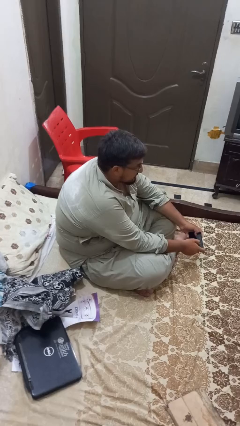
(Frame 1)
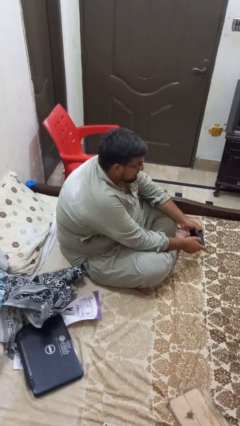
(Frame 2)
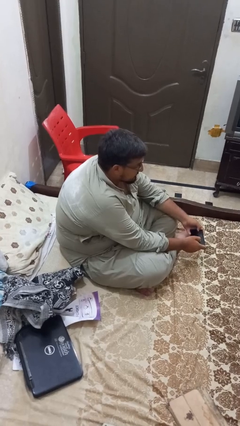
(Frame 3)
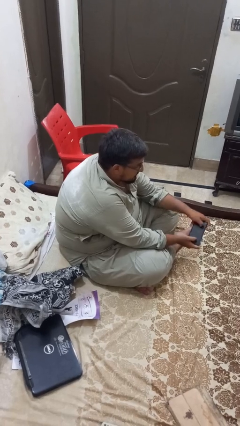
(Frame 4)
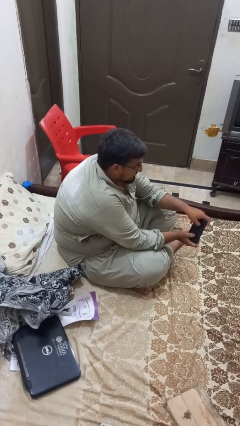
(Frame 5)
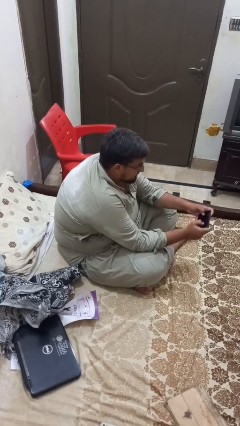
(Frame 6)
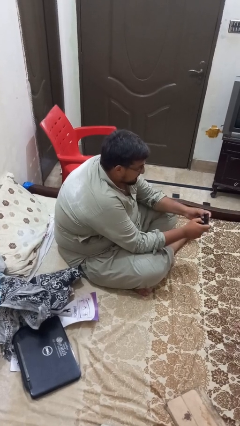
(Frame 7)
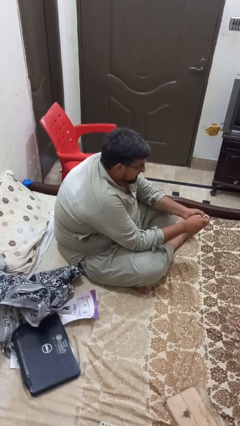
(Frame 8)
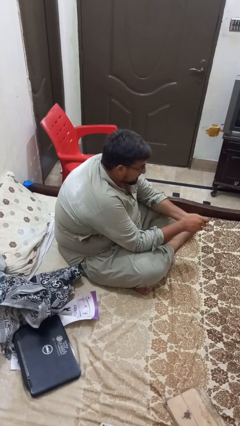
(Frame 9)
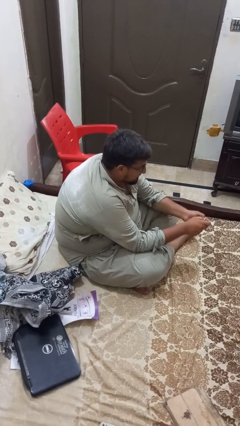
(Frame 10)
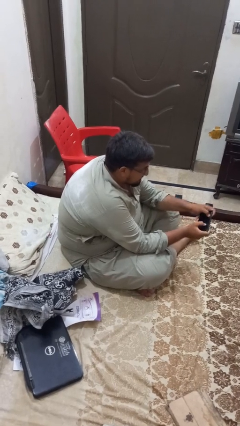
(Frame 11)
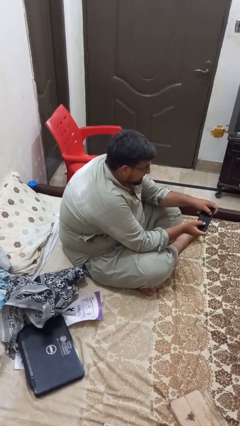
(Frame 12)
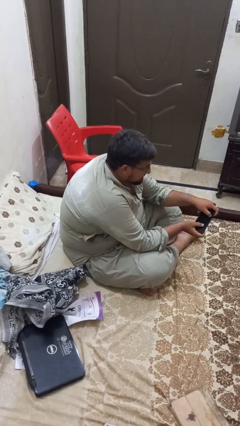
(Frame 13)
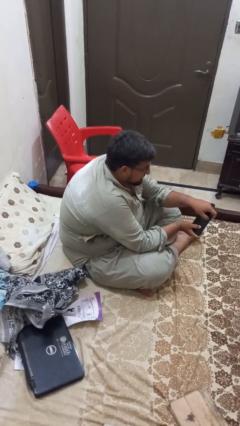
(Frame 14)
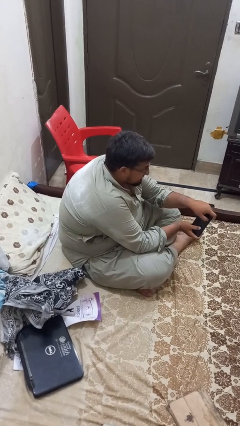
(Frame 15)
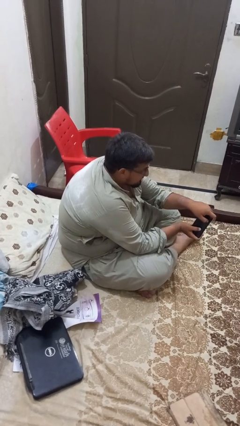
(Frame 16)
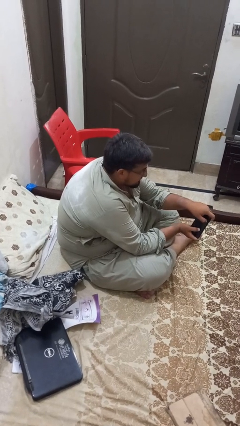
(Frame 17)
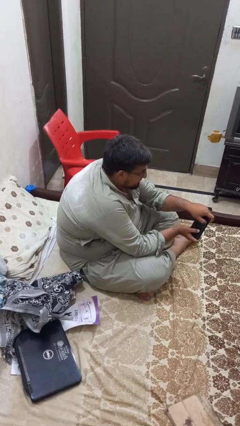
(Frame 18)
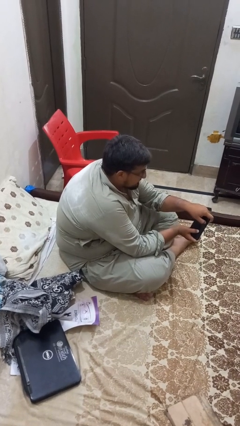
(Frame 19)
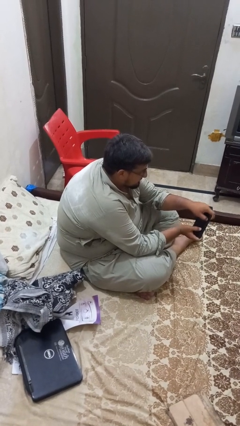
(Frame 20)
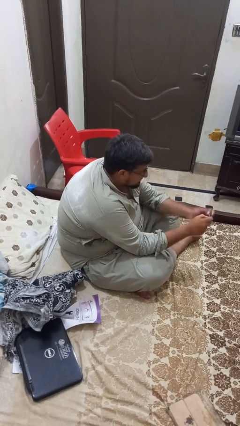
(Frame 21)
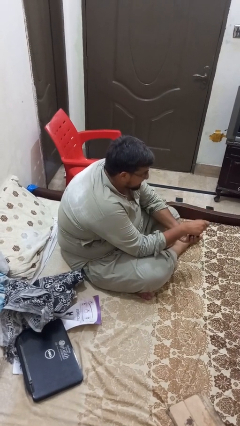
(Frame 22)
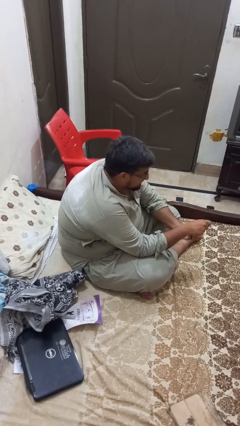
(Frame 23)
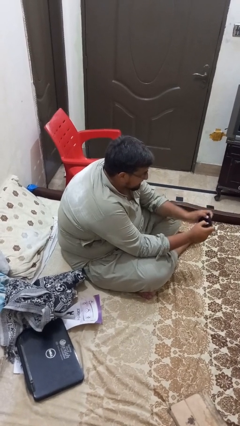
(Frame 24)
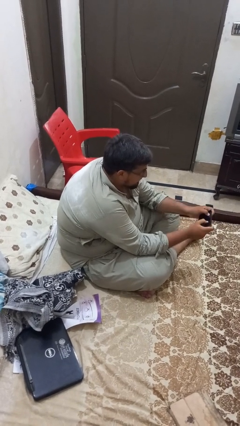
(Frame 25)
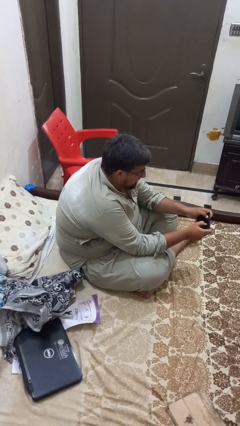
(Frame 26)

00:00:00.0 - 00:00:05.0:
person interacts with handheld game

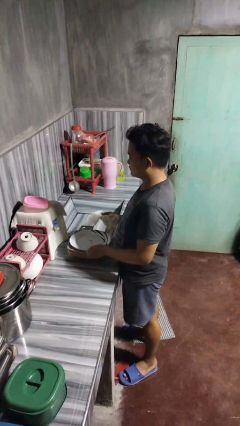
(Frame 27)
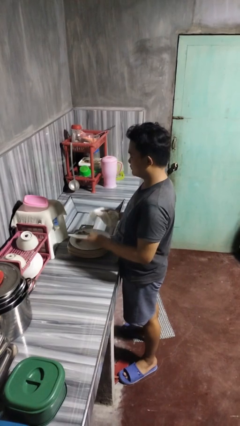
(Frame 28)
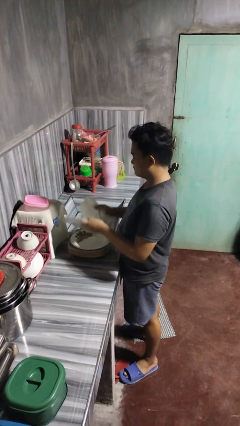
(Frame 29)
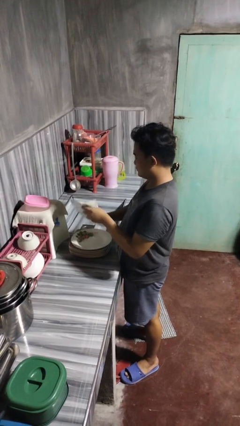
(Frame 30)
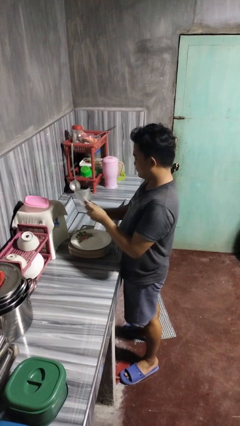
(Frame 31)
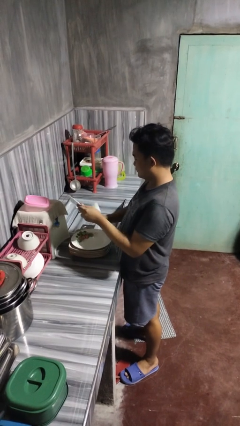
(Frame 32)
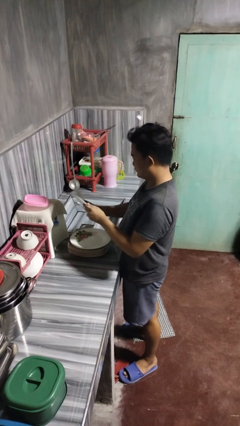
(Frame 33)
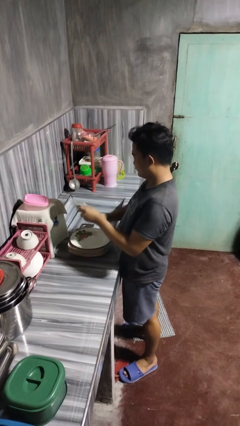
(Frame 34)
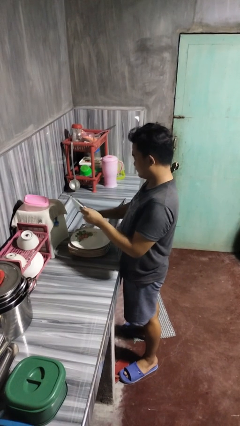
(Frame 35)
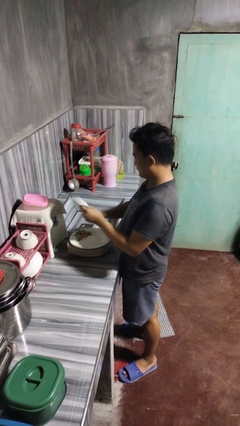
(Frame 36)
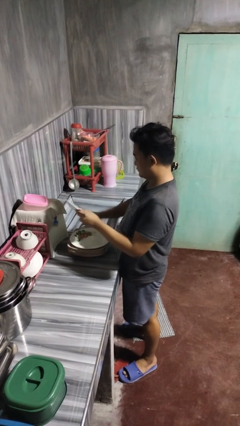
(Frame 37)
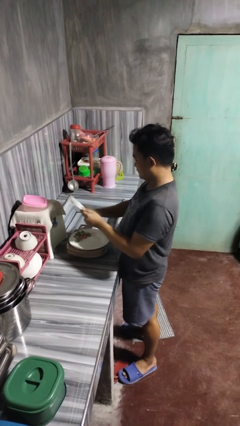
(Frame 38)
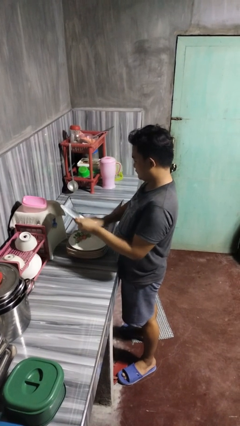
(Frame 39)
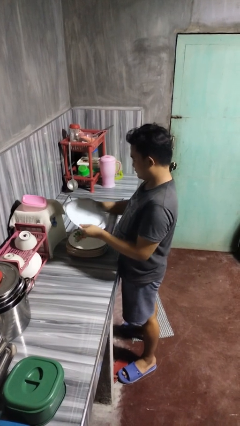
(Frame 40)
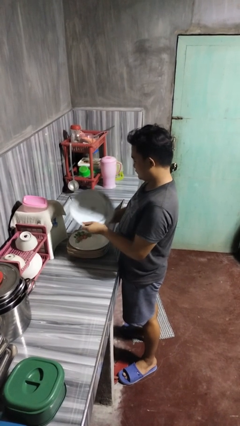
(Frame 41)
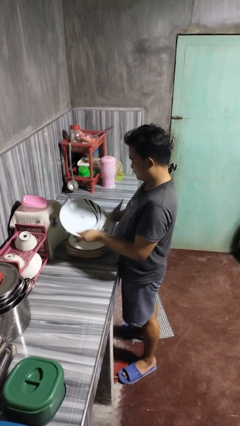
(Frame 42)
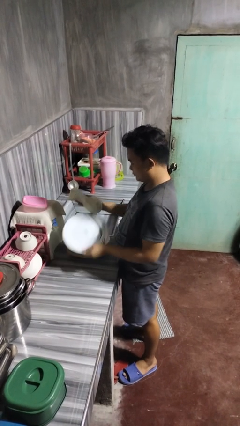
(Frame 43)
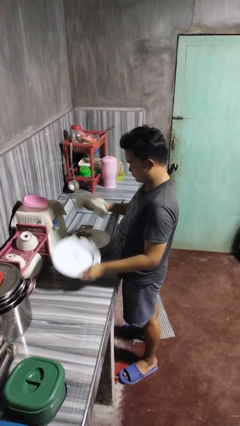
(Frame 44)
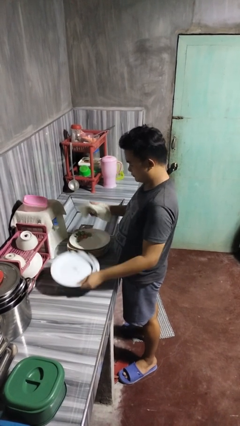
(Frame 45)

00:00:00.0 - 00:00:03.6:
person dries dish

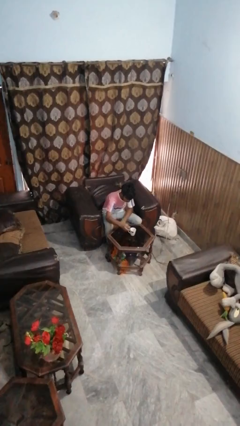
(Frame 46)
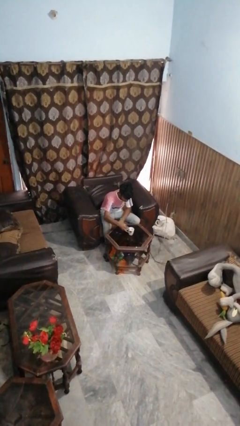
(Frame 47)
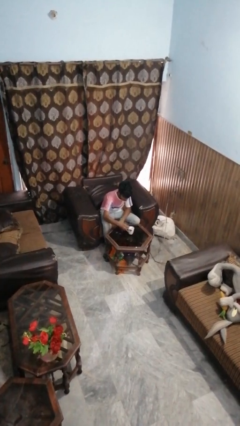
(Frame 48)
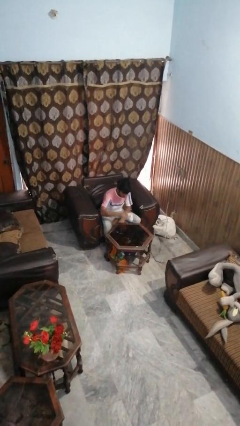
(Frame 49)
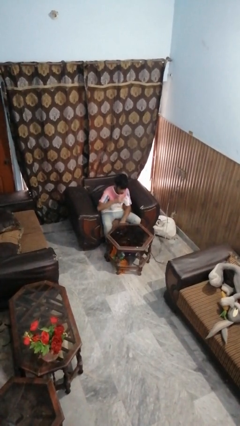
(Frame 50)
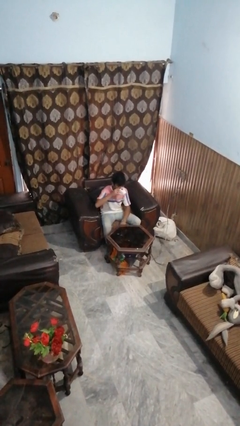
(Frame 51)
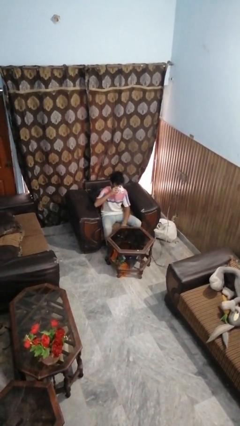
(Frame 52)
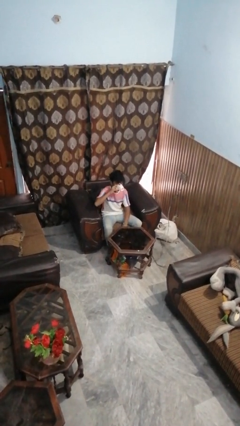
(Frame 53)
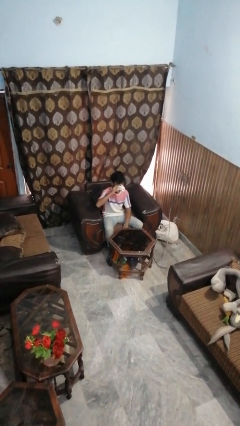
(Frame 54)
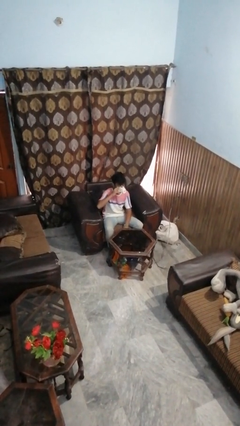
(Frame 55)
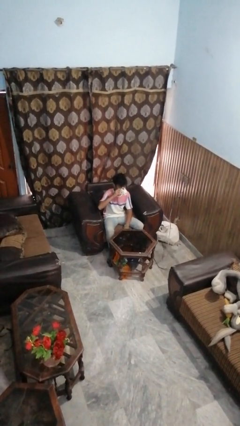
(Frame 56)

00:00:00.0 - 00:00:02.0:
person drinks from mug

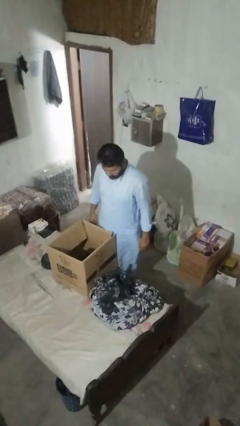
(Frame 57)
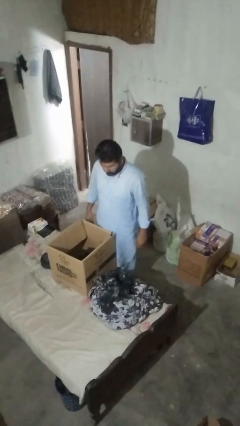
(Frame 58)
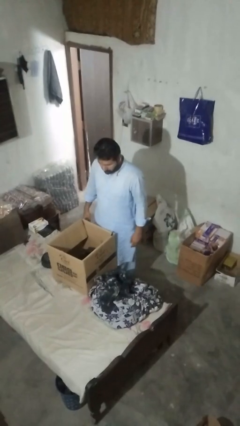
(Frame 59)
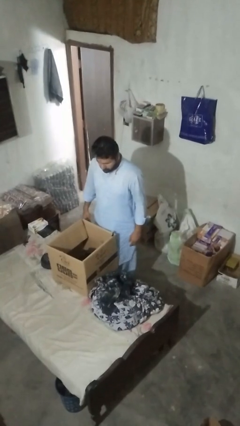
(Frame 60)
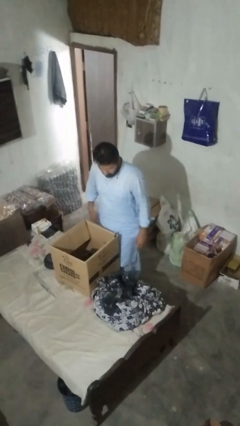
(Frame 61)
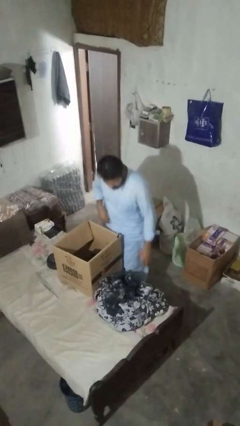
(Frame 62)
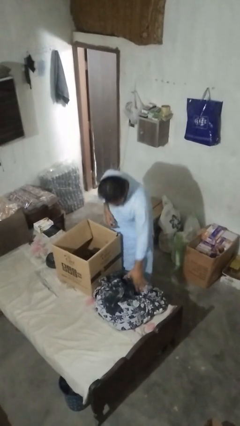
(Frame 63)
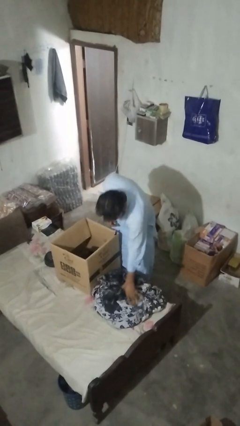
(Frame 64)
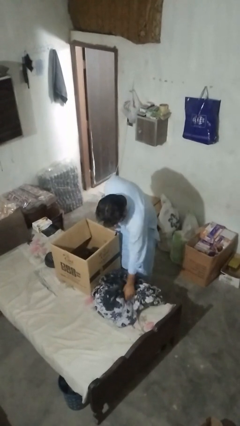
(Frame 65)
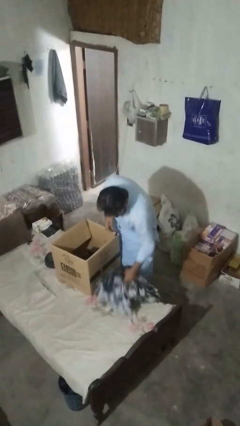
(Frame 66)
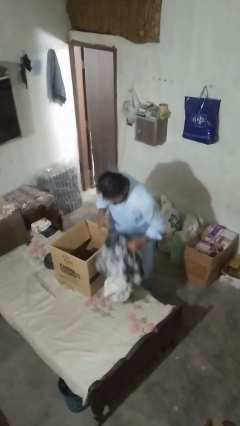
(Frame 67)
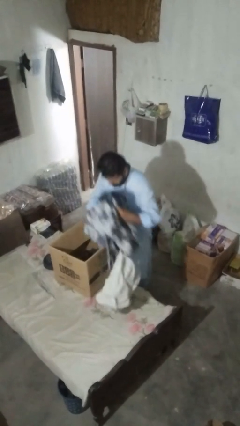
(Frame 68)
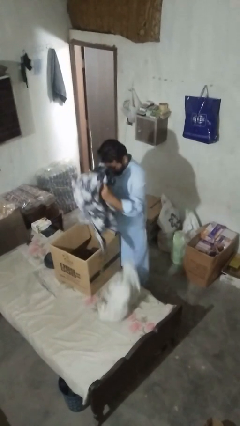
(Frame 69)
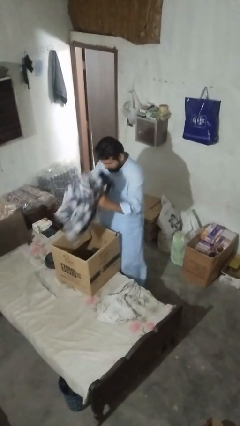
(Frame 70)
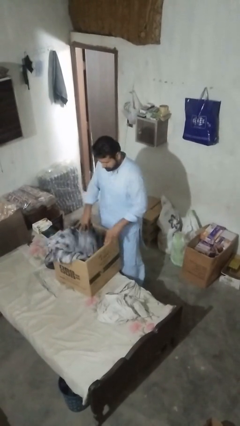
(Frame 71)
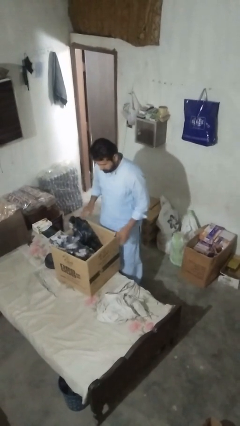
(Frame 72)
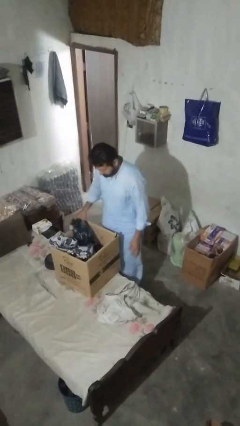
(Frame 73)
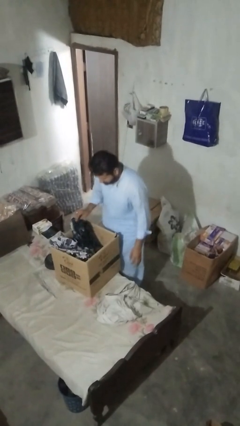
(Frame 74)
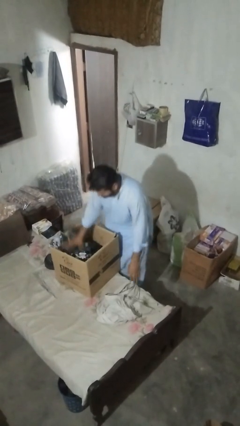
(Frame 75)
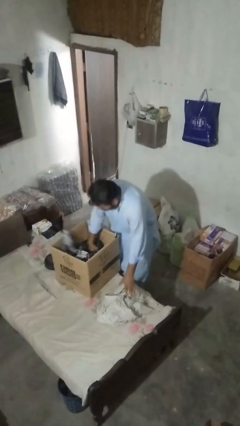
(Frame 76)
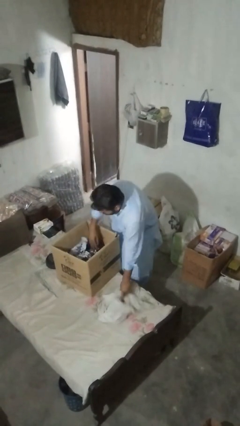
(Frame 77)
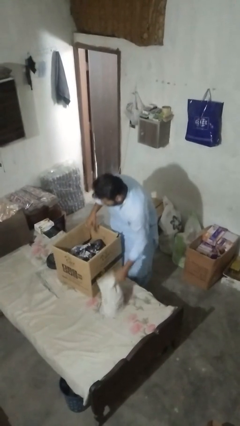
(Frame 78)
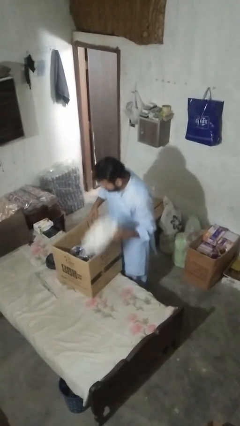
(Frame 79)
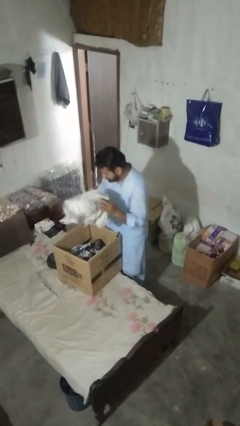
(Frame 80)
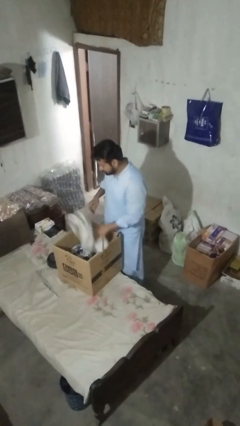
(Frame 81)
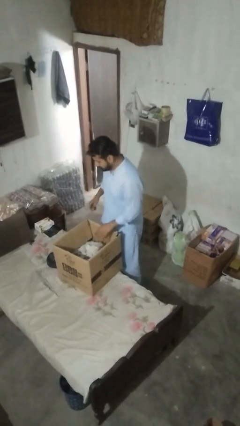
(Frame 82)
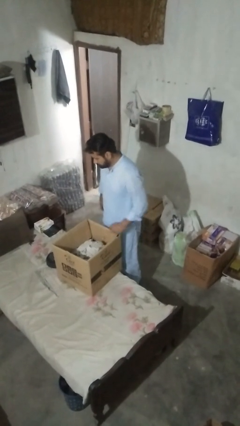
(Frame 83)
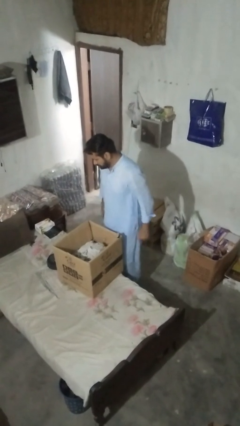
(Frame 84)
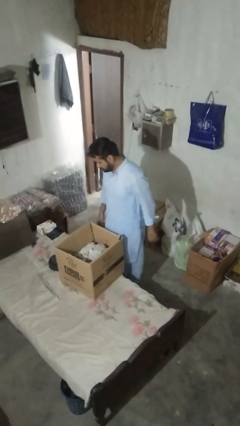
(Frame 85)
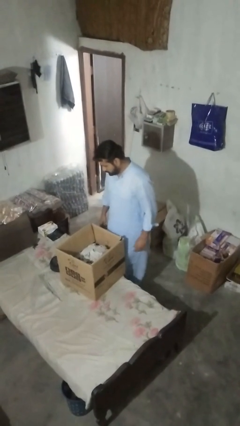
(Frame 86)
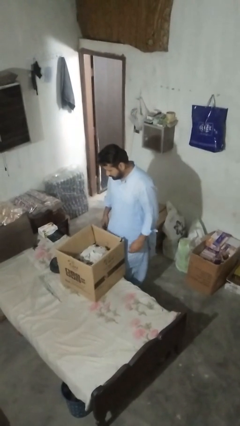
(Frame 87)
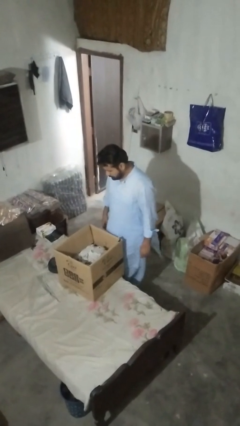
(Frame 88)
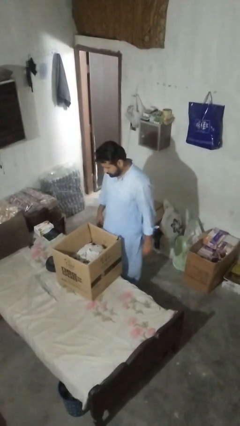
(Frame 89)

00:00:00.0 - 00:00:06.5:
person loads clotheswasher

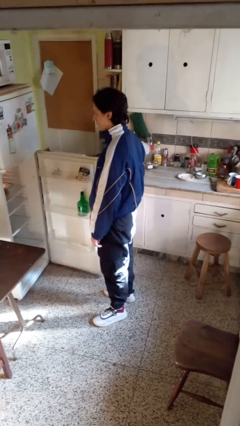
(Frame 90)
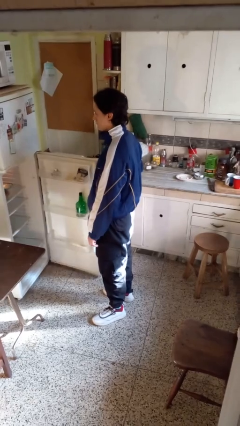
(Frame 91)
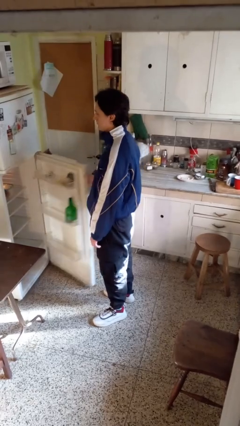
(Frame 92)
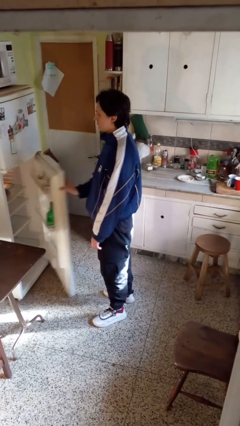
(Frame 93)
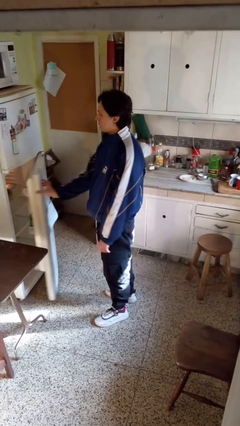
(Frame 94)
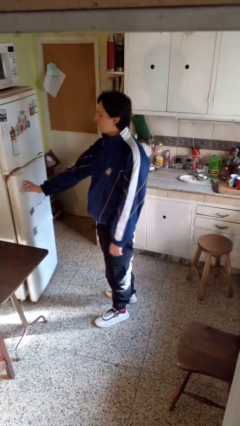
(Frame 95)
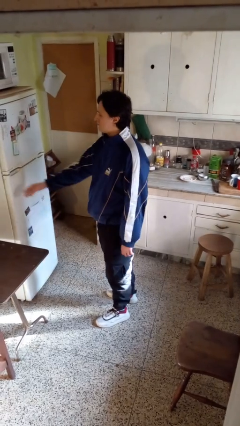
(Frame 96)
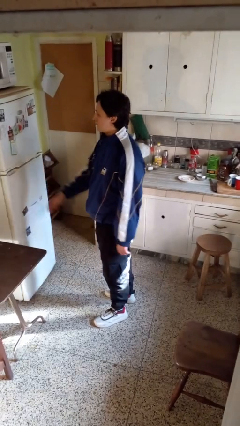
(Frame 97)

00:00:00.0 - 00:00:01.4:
person closes refrigerator
